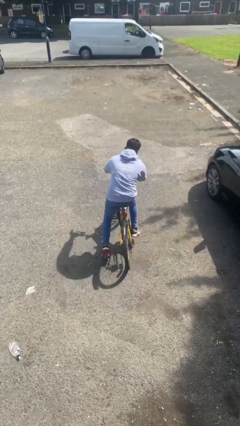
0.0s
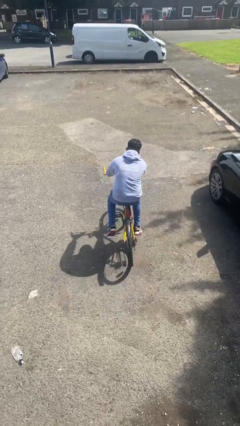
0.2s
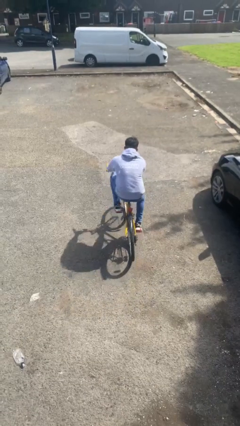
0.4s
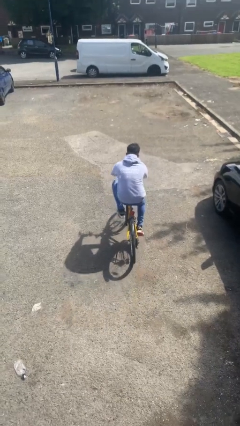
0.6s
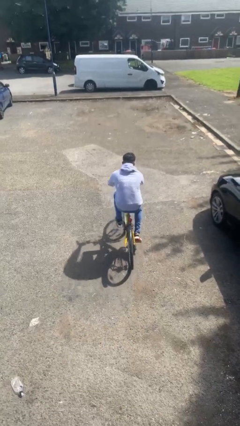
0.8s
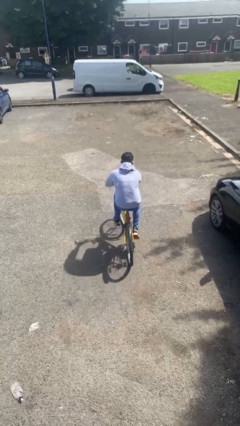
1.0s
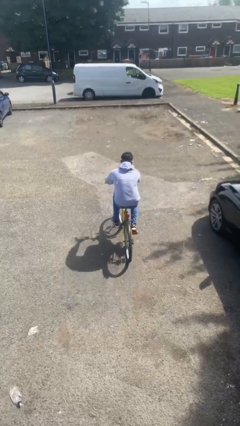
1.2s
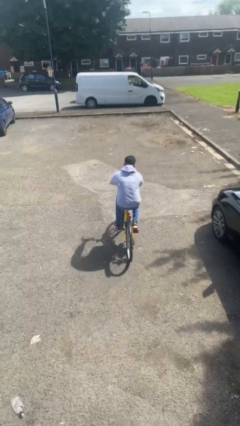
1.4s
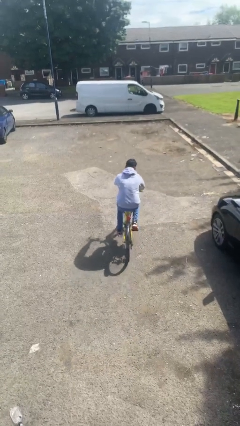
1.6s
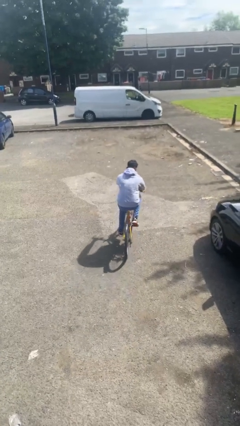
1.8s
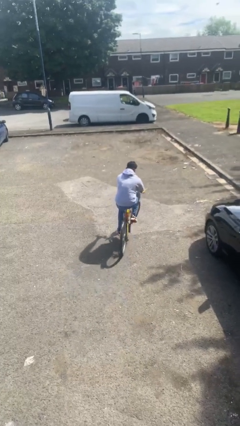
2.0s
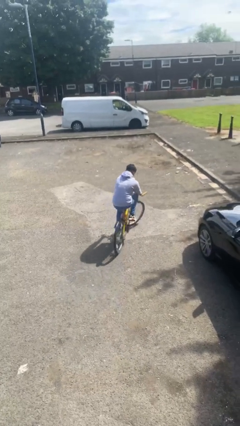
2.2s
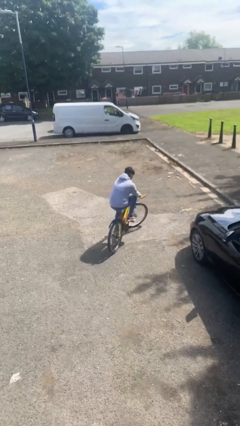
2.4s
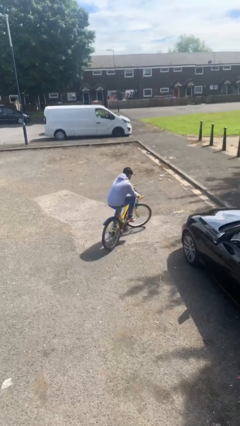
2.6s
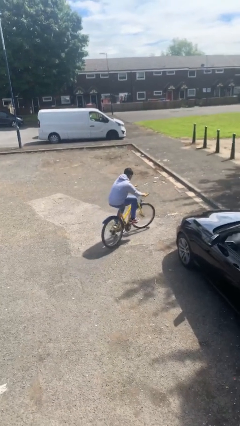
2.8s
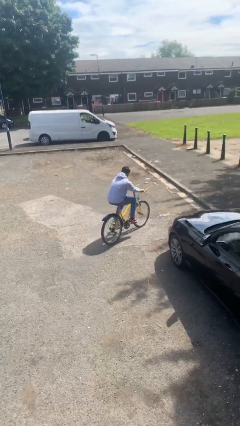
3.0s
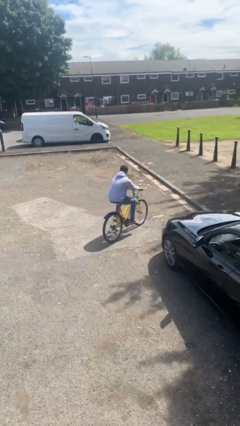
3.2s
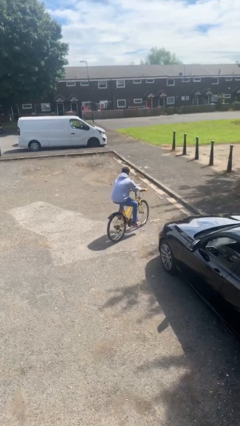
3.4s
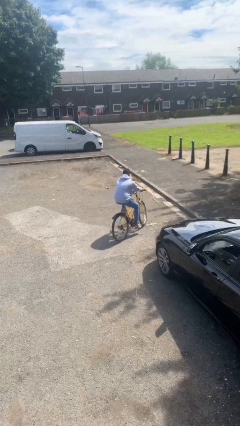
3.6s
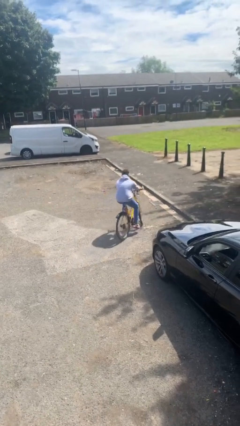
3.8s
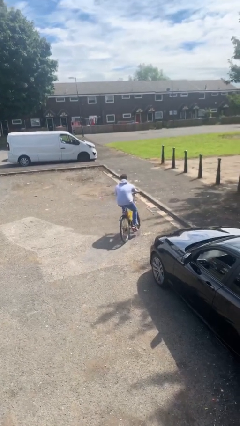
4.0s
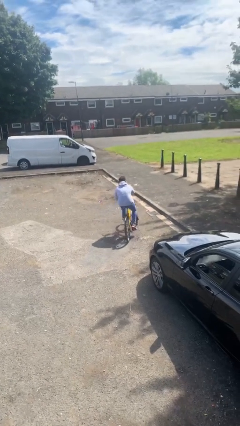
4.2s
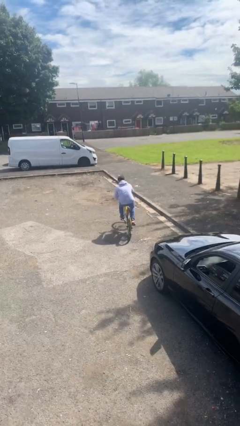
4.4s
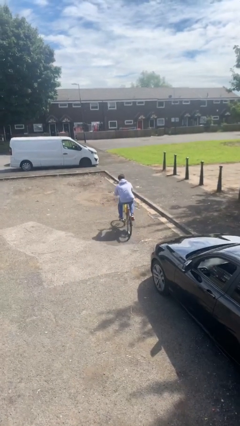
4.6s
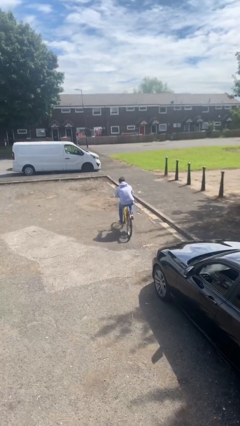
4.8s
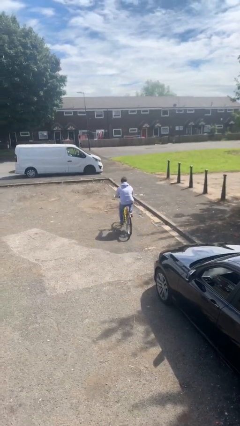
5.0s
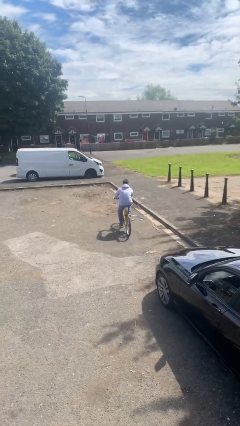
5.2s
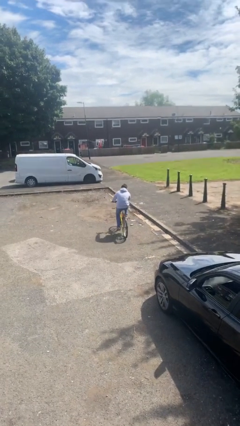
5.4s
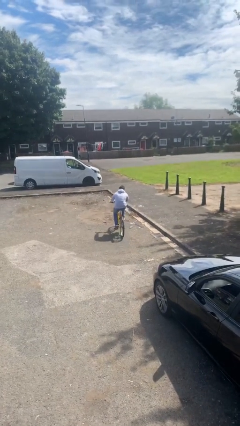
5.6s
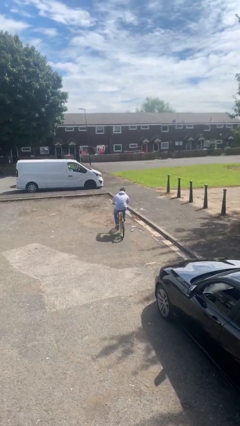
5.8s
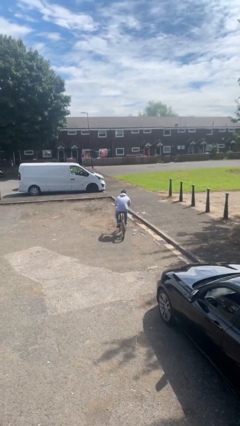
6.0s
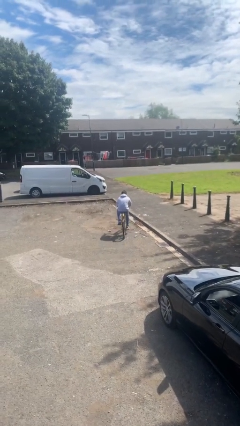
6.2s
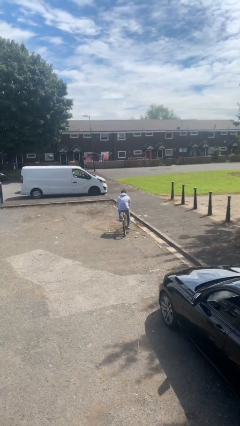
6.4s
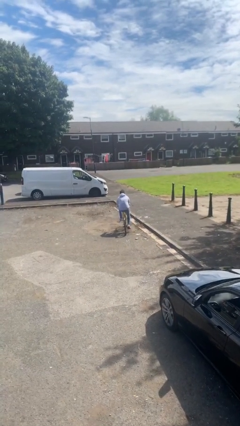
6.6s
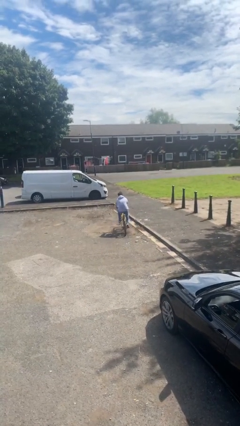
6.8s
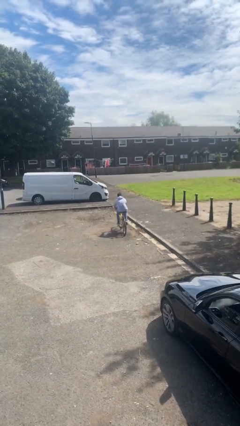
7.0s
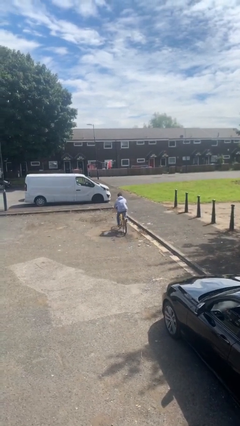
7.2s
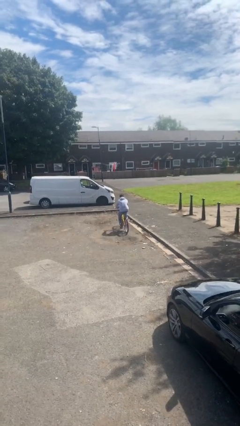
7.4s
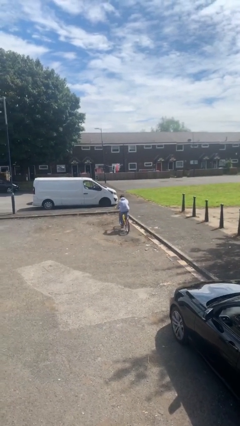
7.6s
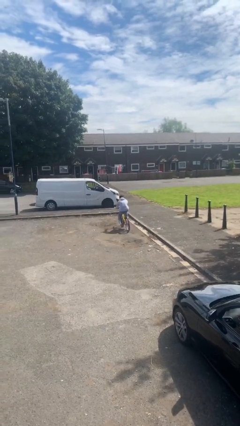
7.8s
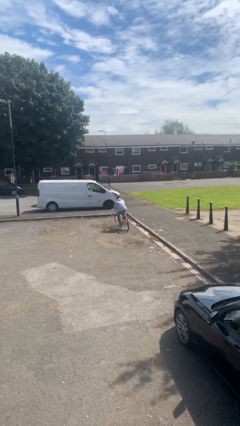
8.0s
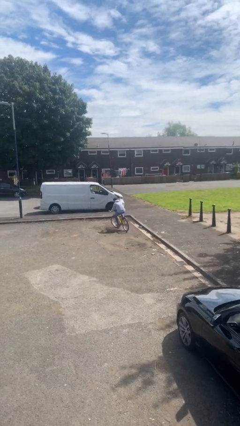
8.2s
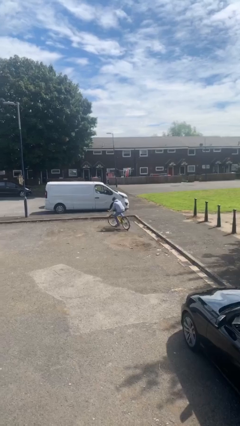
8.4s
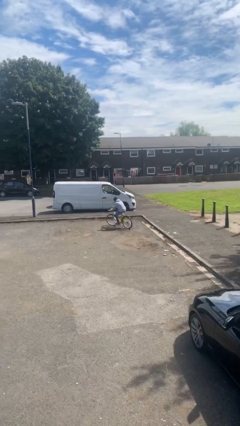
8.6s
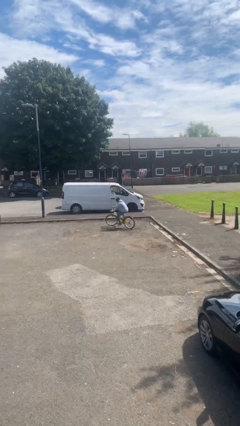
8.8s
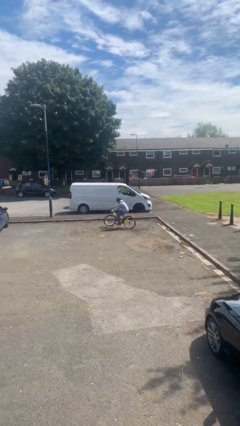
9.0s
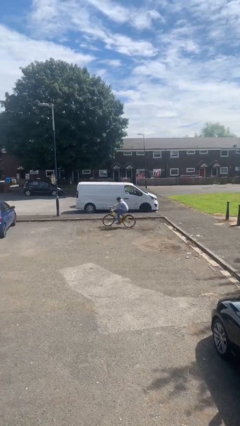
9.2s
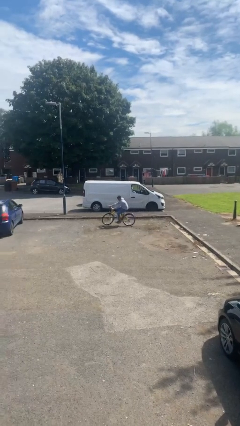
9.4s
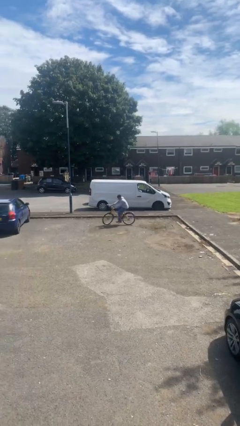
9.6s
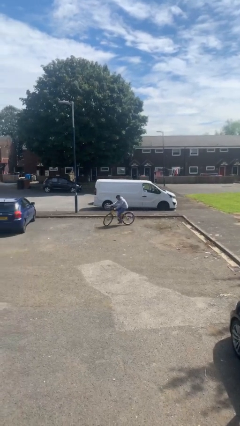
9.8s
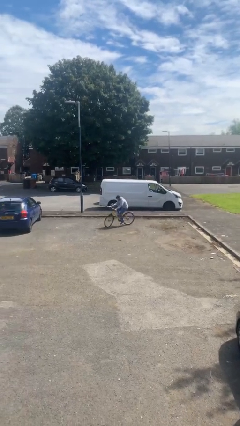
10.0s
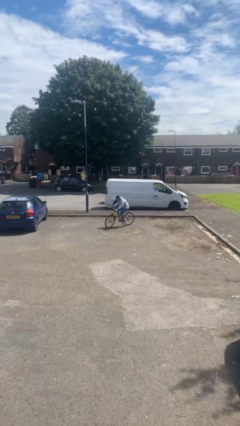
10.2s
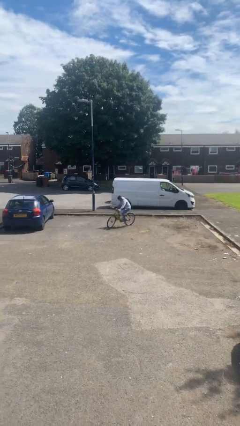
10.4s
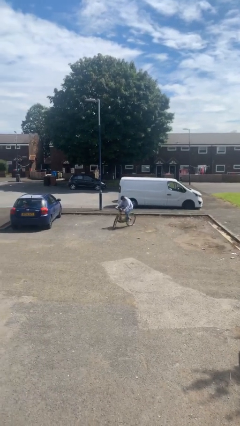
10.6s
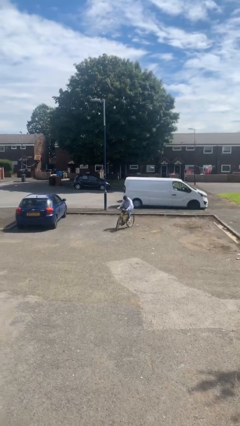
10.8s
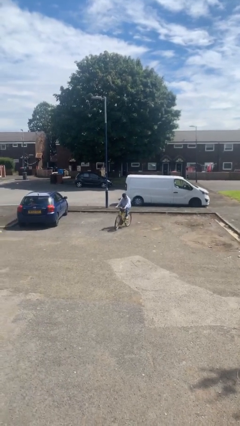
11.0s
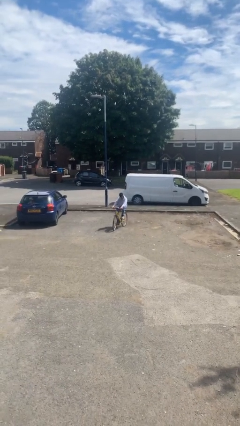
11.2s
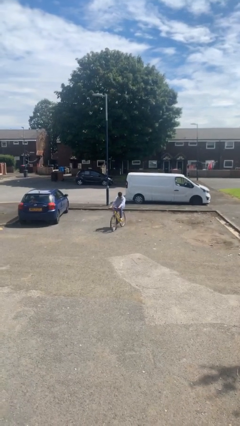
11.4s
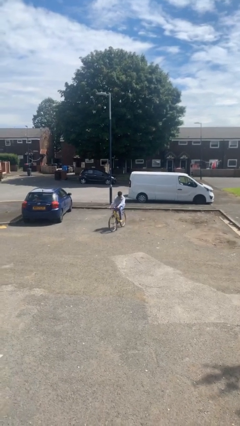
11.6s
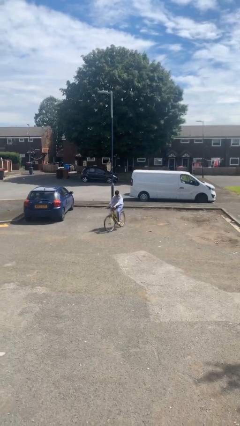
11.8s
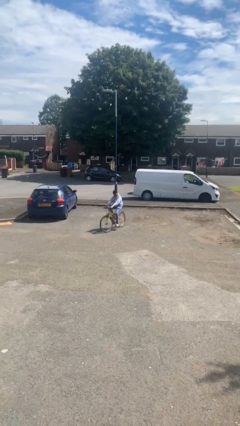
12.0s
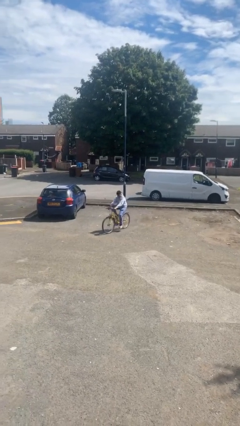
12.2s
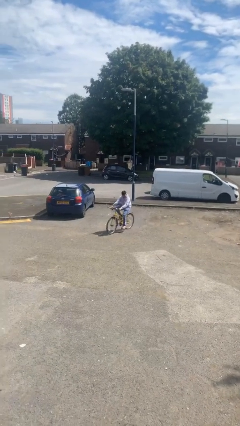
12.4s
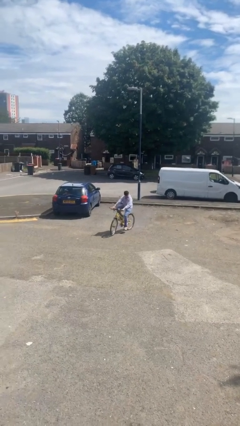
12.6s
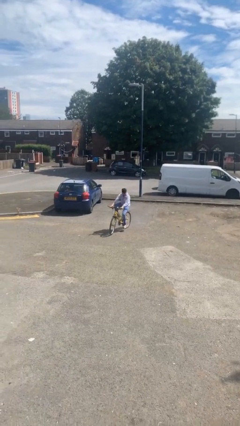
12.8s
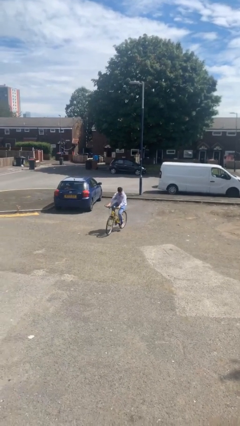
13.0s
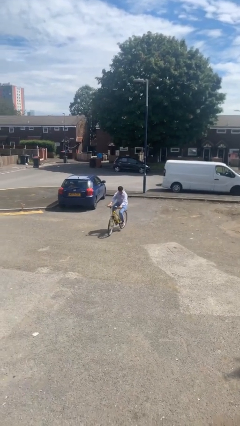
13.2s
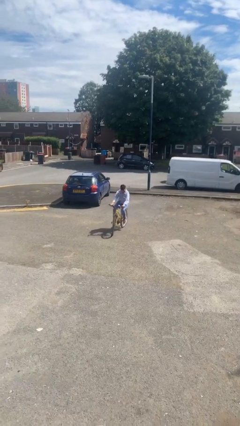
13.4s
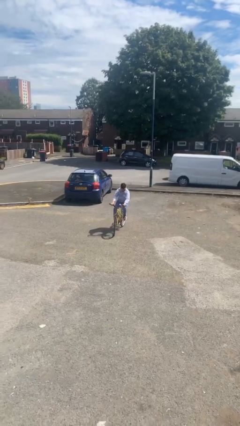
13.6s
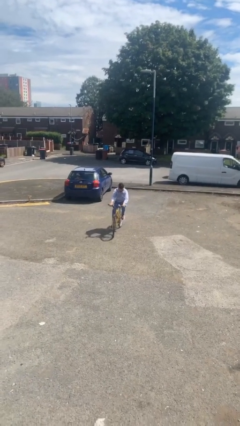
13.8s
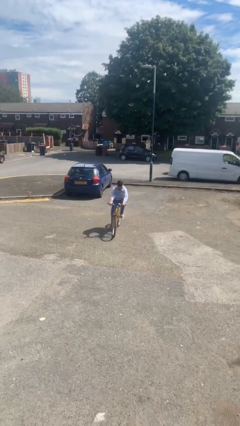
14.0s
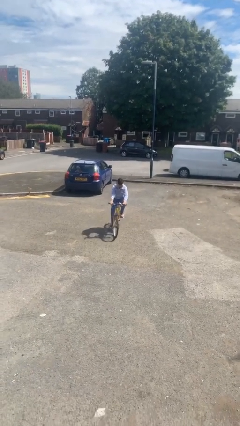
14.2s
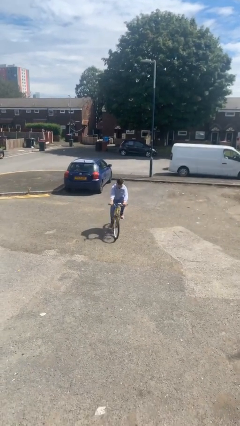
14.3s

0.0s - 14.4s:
person rides bicycle

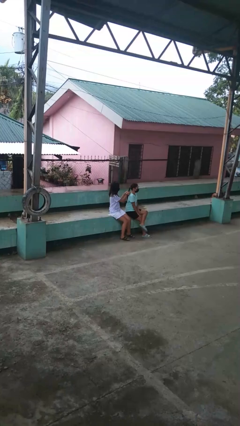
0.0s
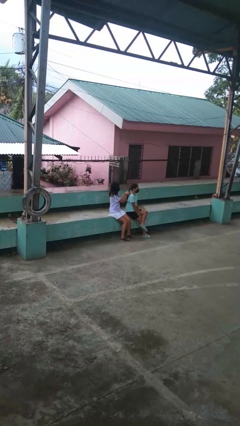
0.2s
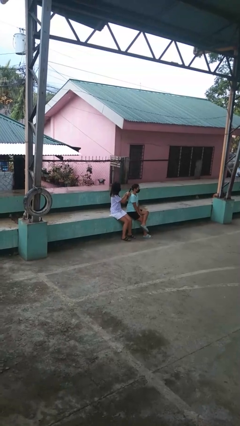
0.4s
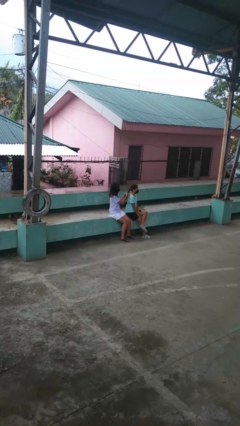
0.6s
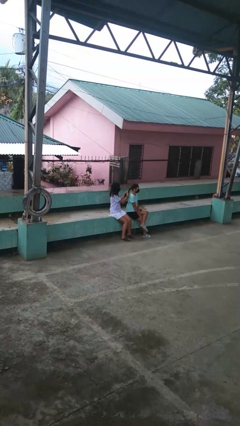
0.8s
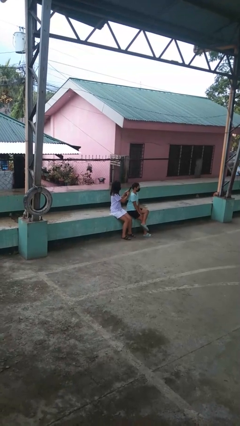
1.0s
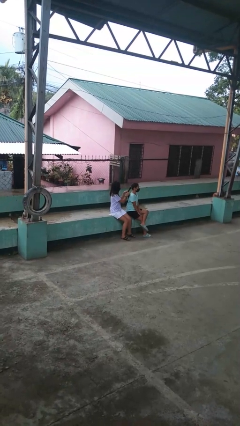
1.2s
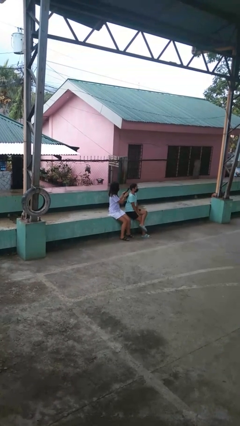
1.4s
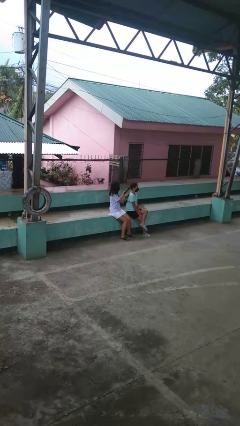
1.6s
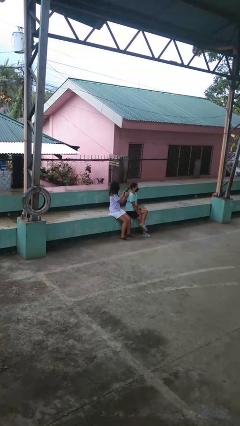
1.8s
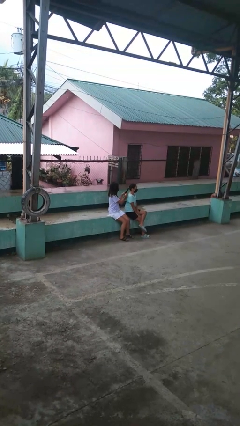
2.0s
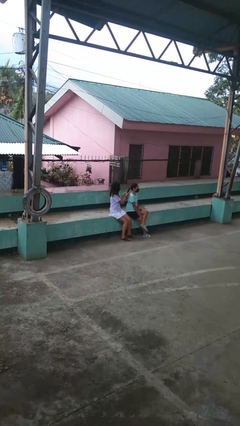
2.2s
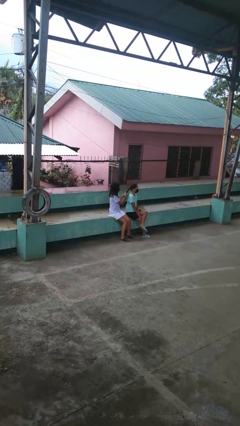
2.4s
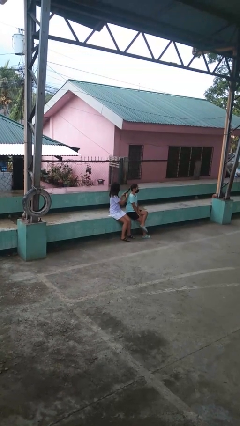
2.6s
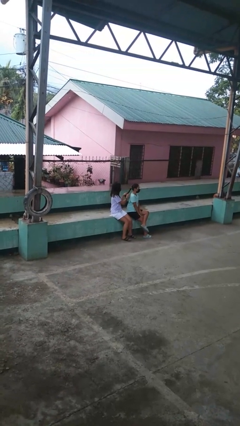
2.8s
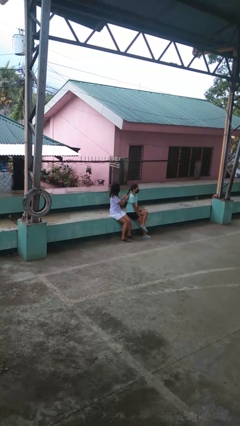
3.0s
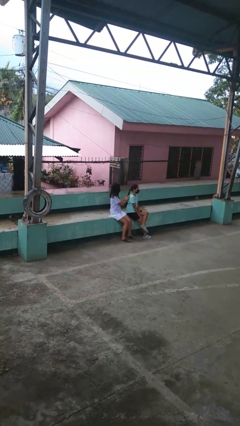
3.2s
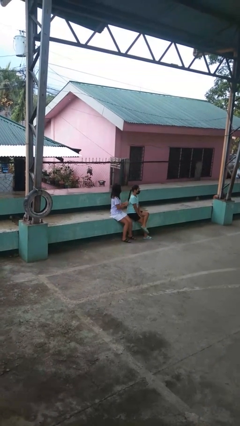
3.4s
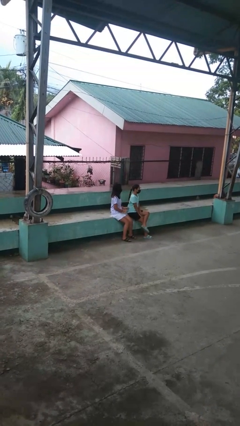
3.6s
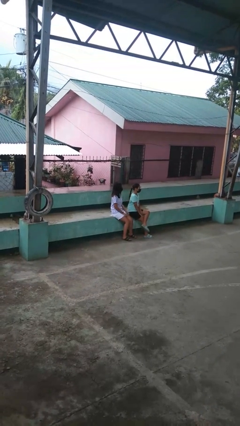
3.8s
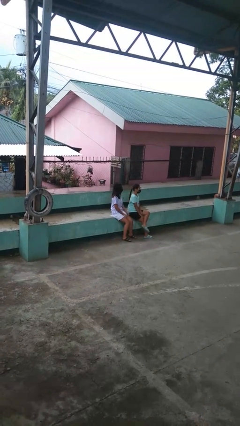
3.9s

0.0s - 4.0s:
person braids hair of person
